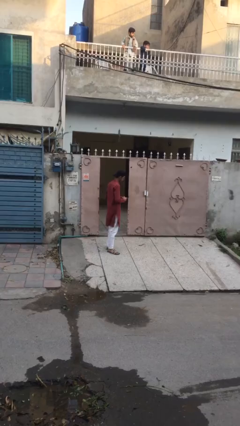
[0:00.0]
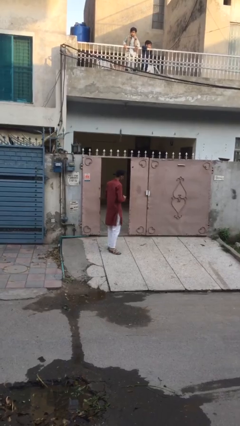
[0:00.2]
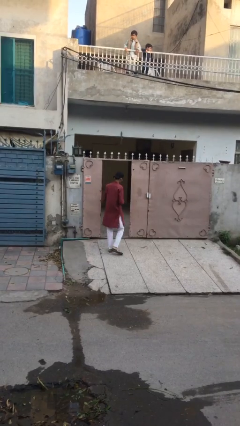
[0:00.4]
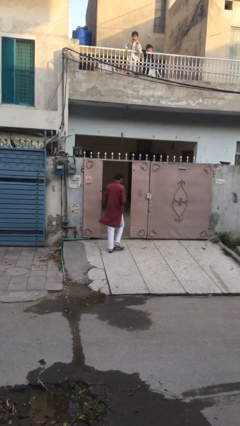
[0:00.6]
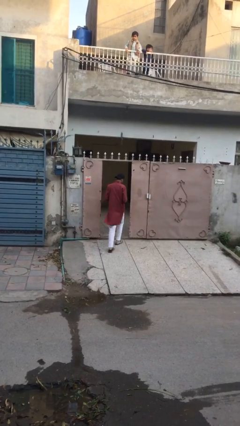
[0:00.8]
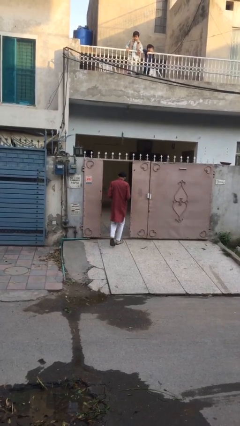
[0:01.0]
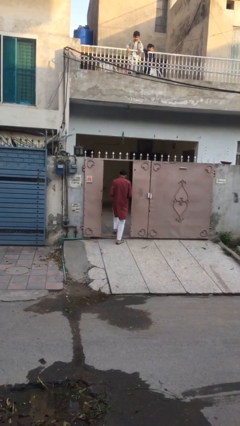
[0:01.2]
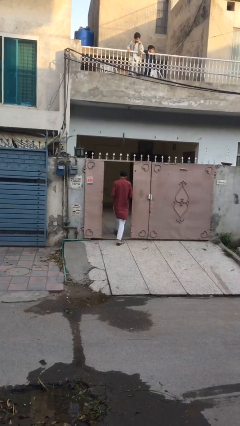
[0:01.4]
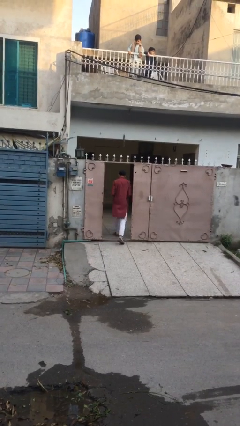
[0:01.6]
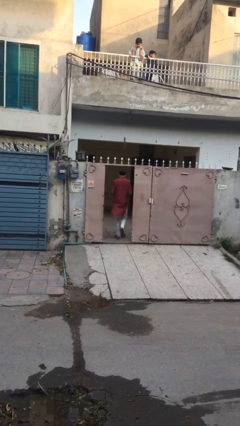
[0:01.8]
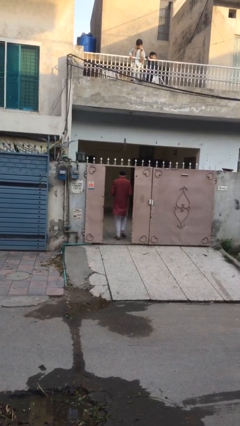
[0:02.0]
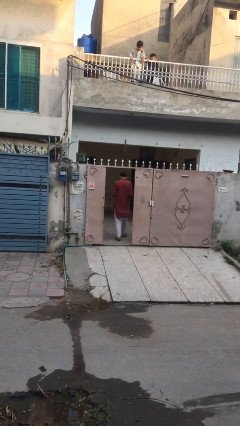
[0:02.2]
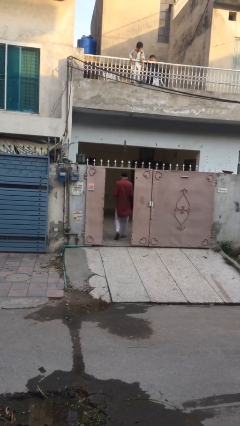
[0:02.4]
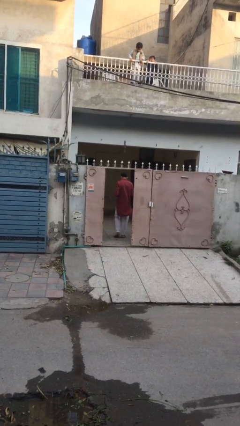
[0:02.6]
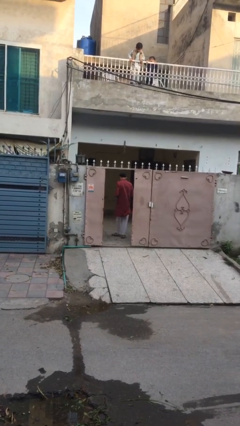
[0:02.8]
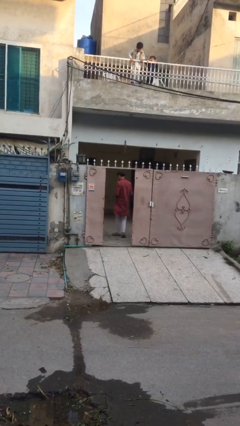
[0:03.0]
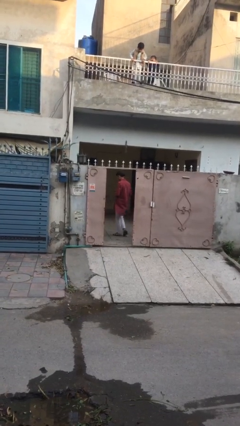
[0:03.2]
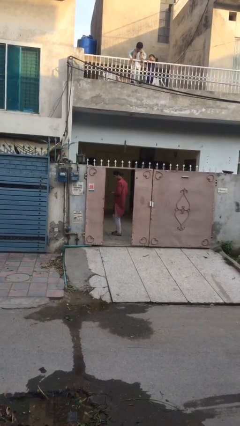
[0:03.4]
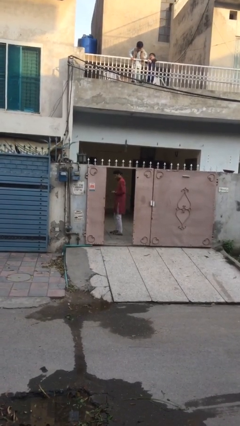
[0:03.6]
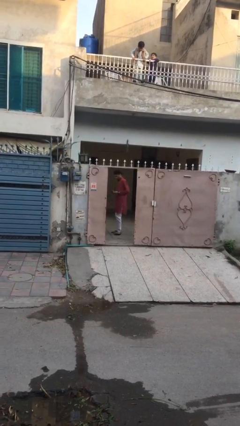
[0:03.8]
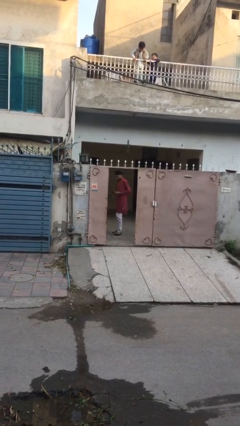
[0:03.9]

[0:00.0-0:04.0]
person enters scene through structure

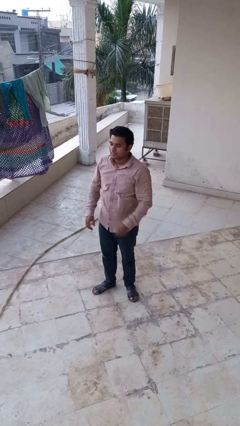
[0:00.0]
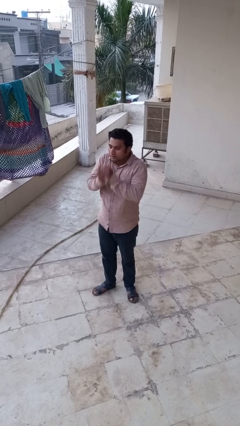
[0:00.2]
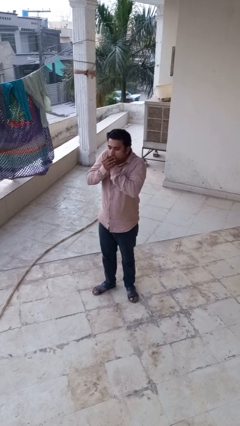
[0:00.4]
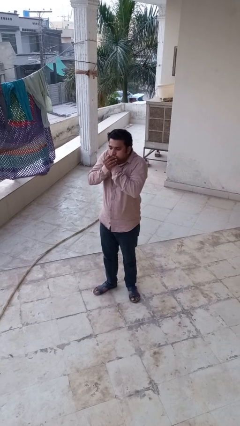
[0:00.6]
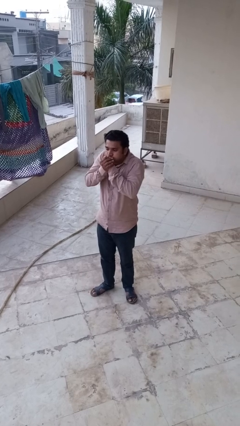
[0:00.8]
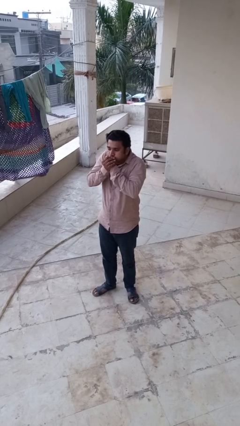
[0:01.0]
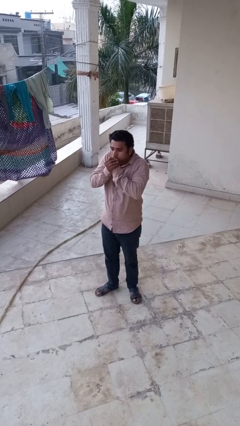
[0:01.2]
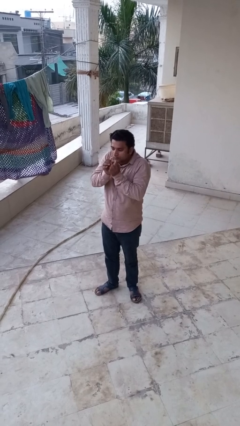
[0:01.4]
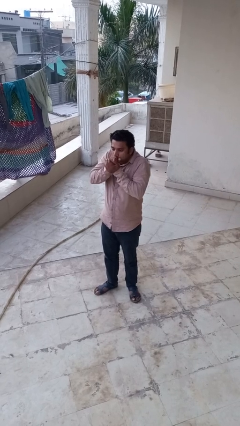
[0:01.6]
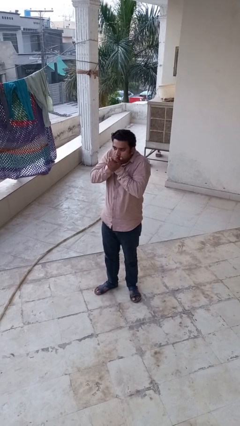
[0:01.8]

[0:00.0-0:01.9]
person blows into hands

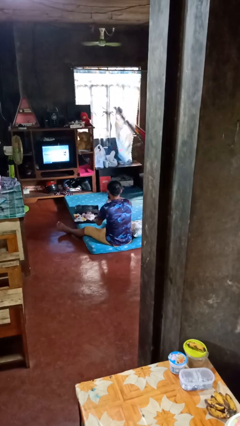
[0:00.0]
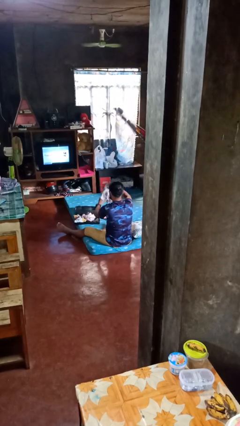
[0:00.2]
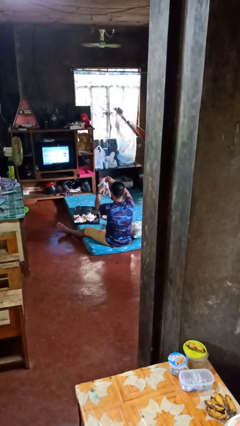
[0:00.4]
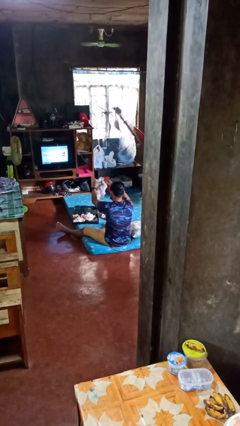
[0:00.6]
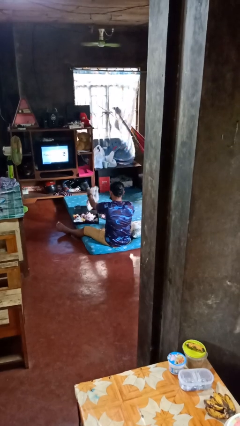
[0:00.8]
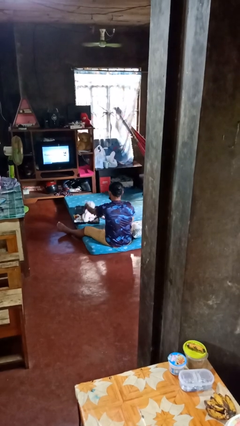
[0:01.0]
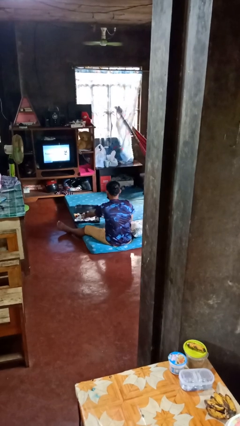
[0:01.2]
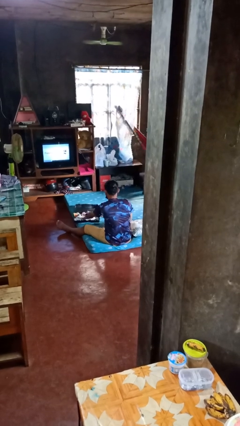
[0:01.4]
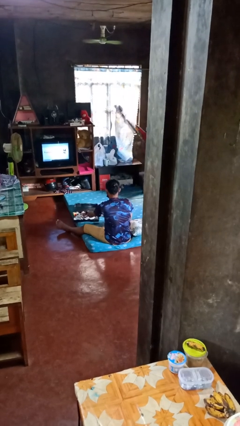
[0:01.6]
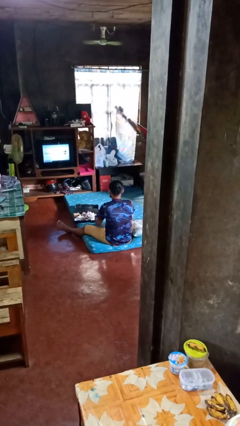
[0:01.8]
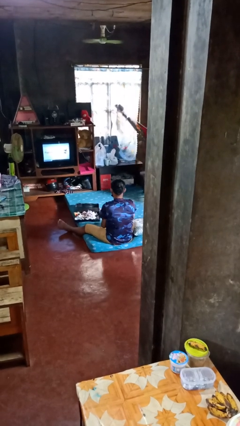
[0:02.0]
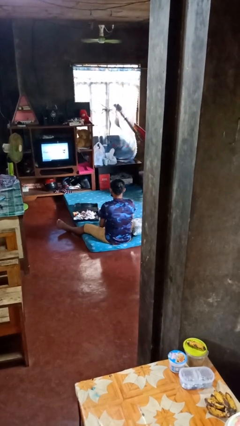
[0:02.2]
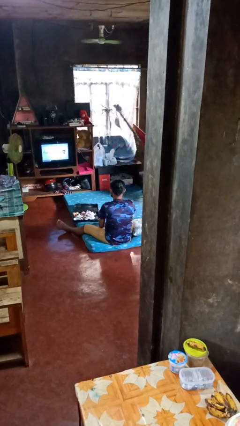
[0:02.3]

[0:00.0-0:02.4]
person loads clothes into suitcase

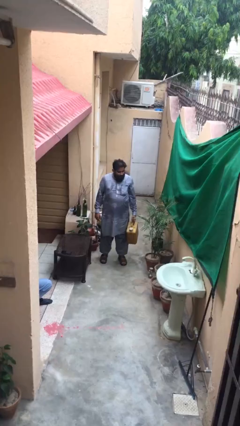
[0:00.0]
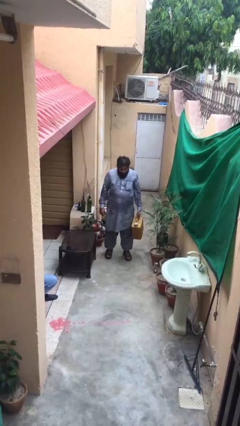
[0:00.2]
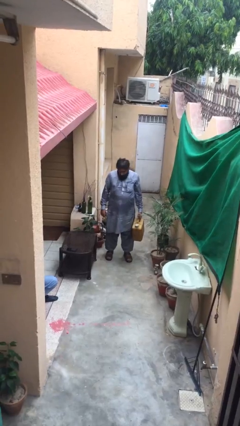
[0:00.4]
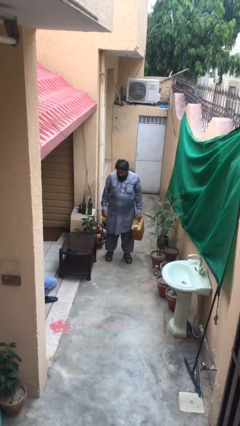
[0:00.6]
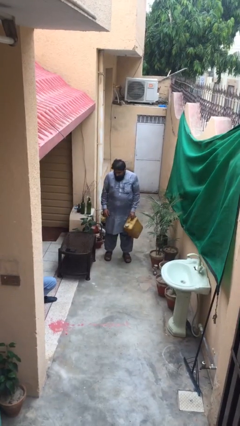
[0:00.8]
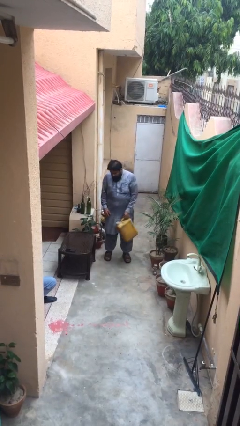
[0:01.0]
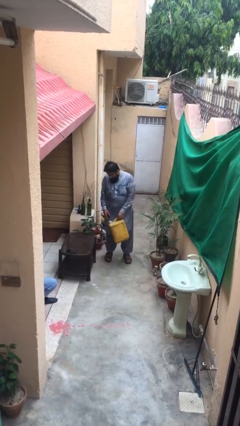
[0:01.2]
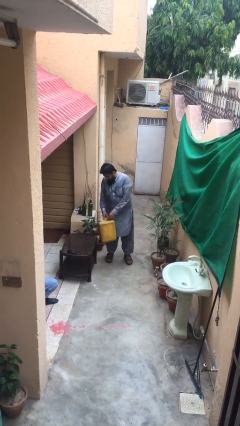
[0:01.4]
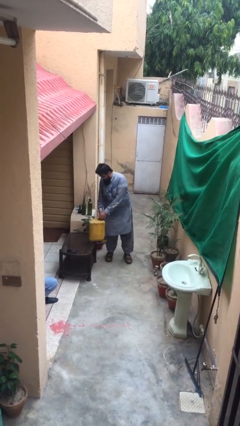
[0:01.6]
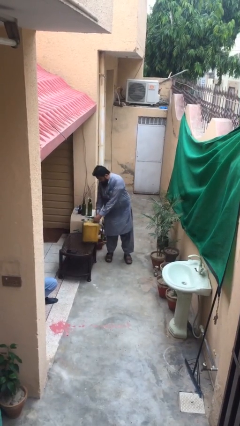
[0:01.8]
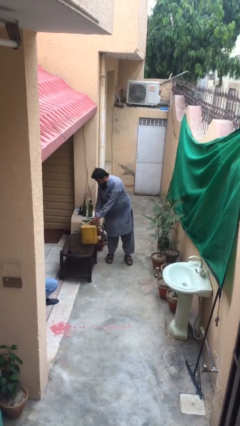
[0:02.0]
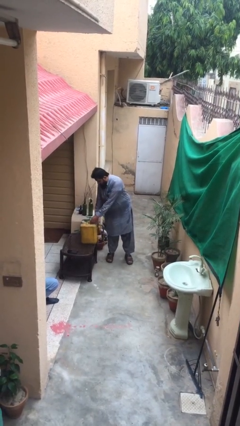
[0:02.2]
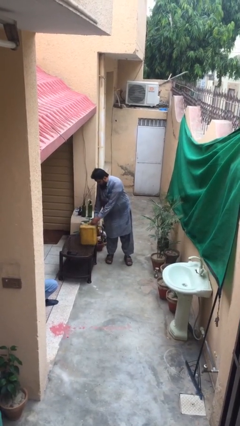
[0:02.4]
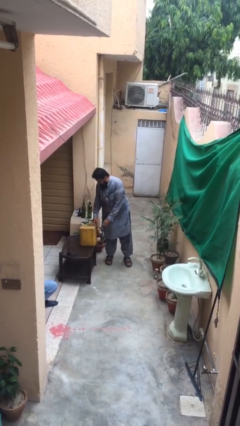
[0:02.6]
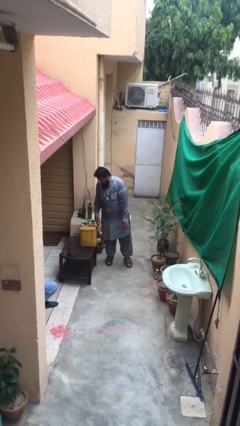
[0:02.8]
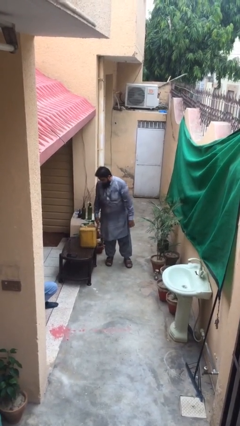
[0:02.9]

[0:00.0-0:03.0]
person puts down object on table

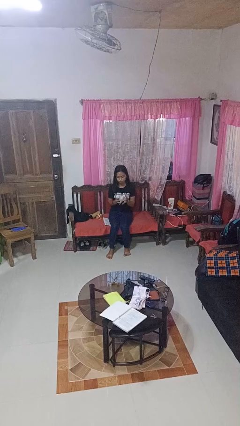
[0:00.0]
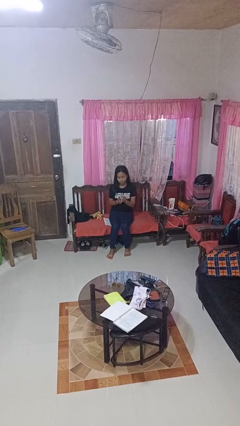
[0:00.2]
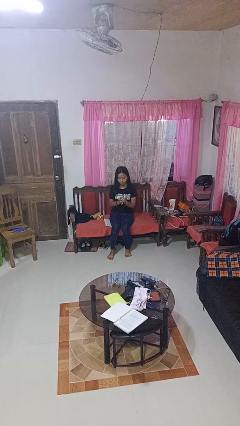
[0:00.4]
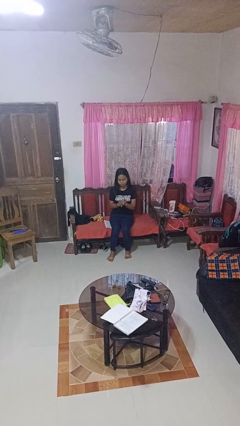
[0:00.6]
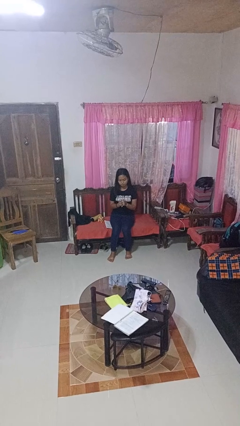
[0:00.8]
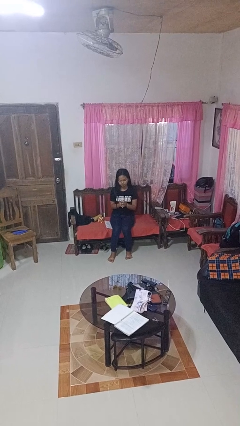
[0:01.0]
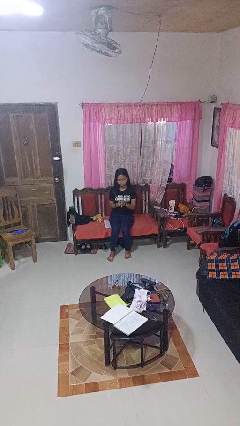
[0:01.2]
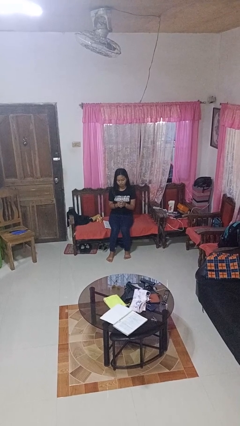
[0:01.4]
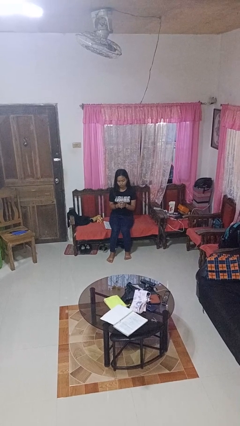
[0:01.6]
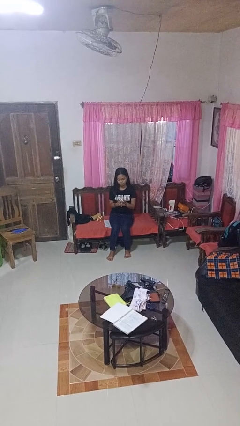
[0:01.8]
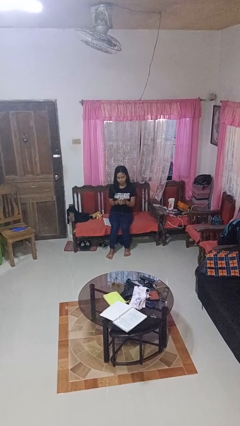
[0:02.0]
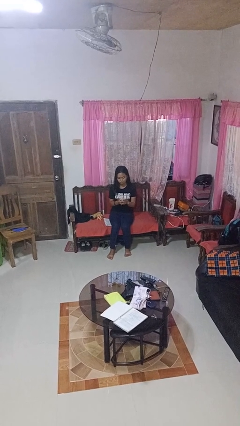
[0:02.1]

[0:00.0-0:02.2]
person crumples paper

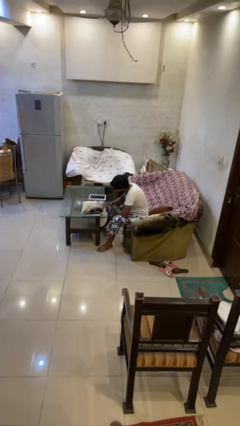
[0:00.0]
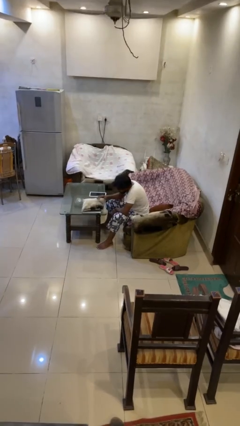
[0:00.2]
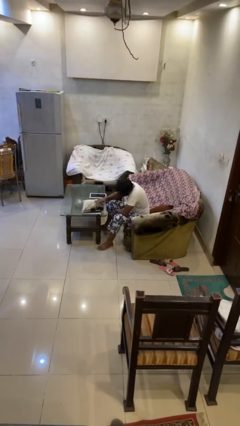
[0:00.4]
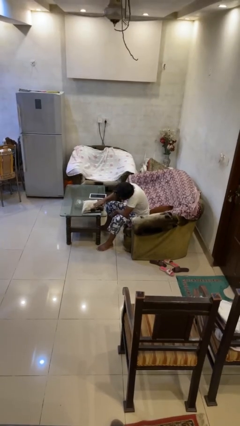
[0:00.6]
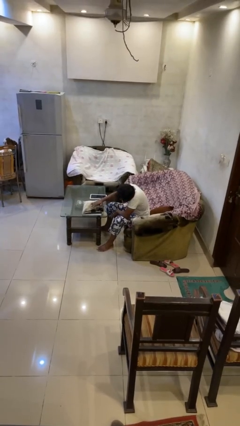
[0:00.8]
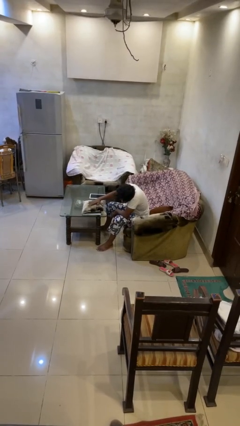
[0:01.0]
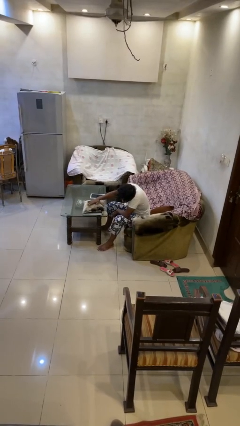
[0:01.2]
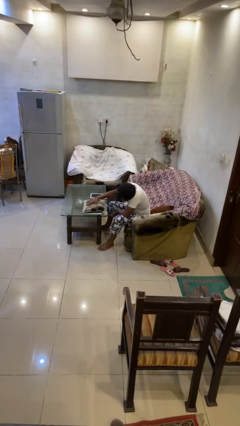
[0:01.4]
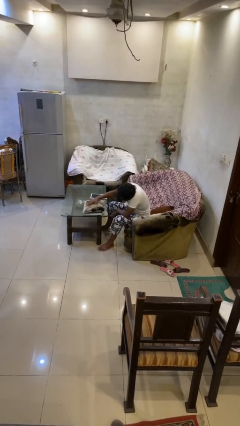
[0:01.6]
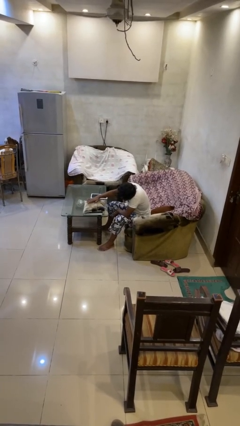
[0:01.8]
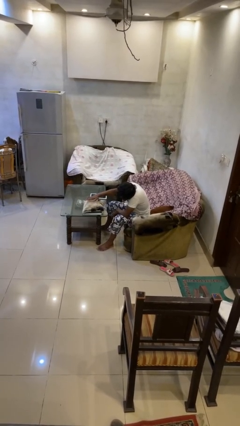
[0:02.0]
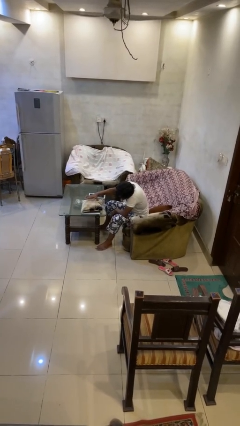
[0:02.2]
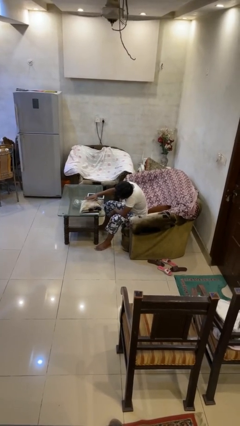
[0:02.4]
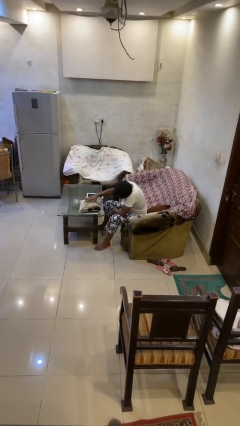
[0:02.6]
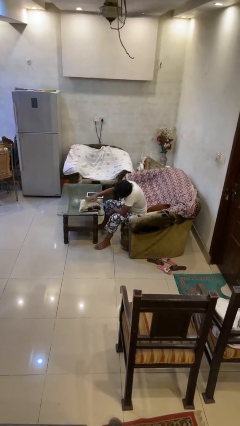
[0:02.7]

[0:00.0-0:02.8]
person waves hand over object

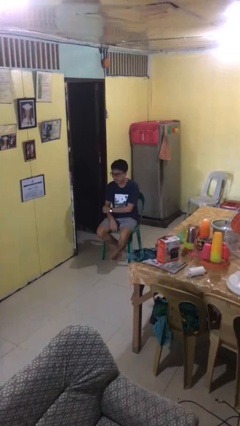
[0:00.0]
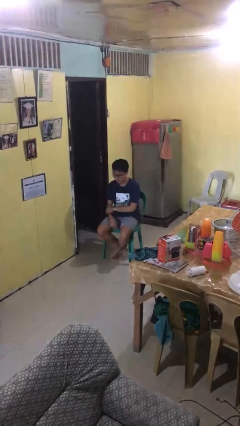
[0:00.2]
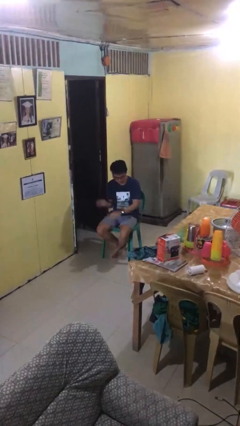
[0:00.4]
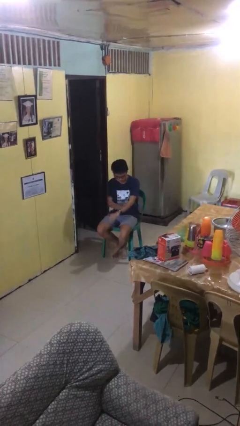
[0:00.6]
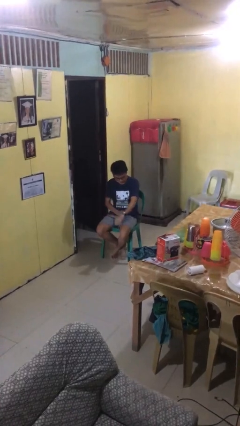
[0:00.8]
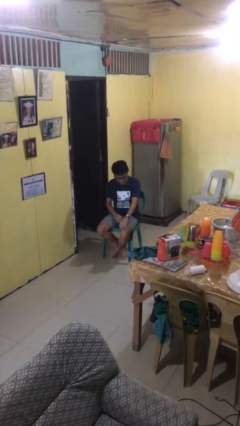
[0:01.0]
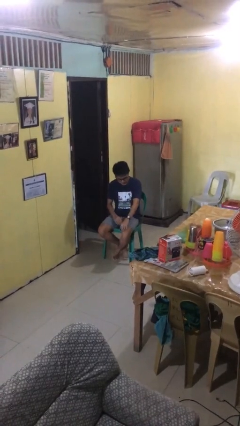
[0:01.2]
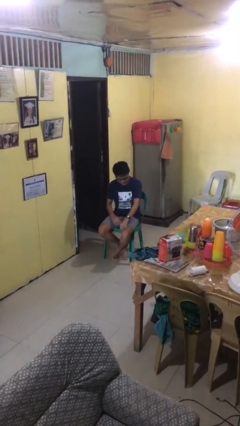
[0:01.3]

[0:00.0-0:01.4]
person swats bug
